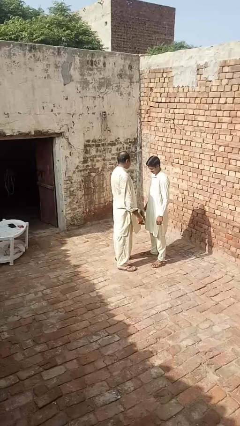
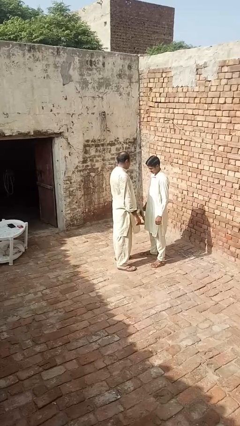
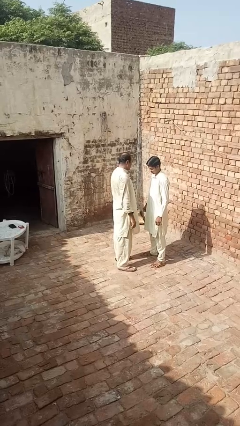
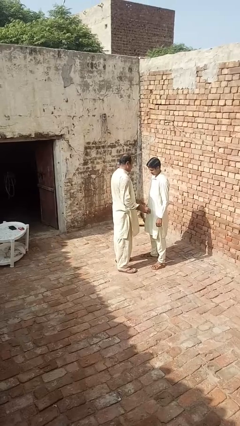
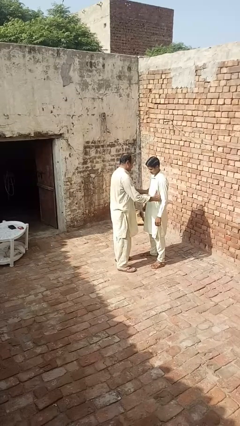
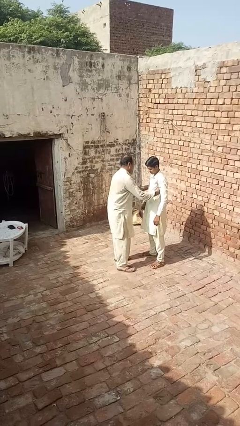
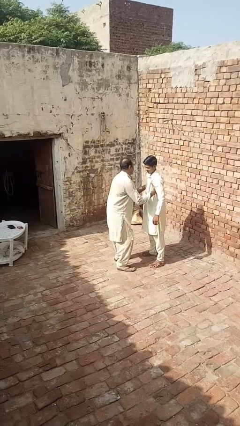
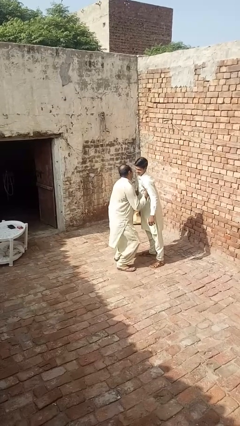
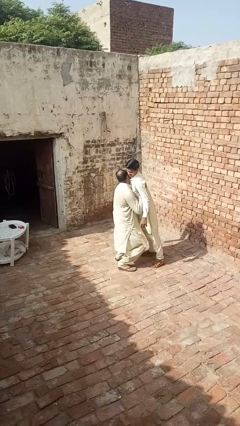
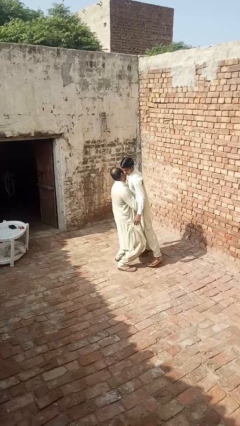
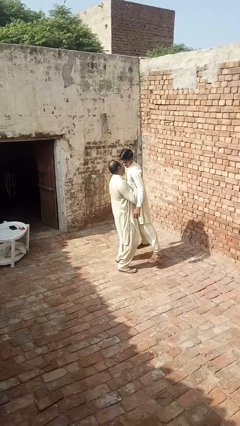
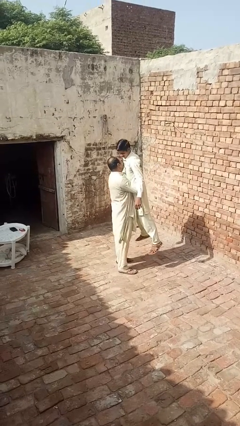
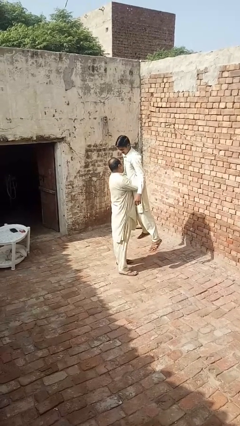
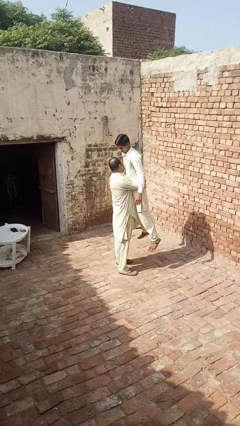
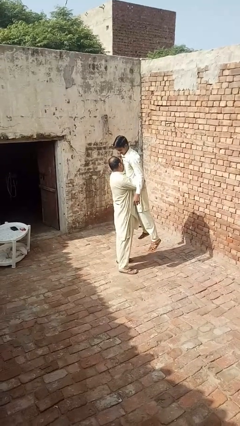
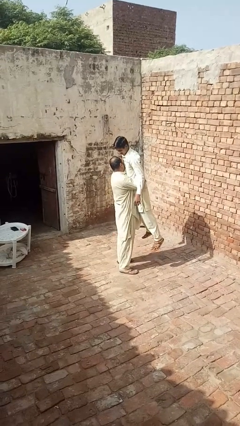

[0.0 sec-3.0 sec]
person picks up person

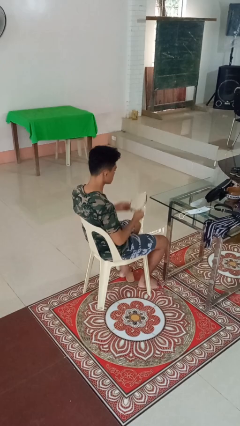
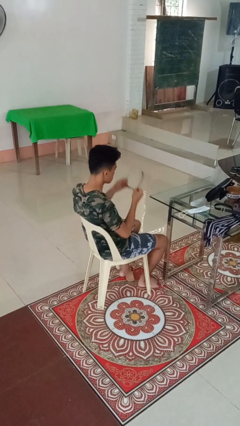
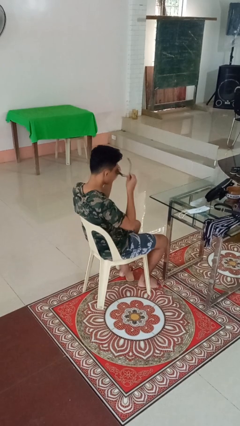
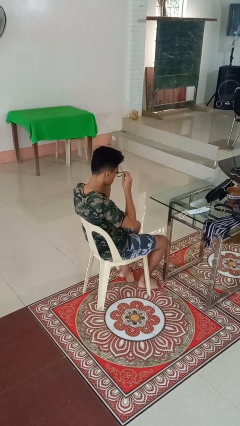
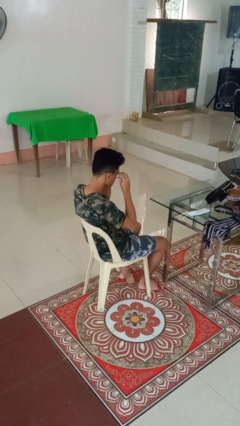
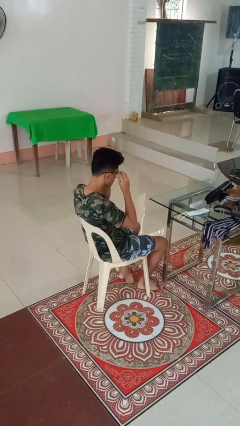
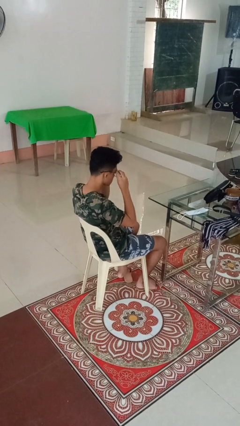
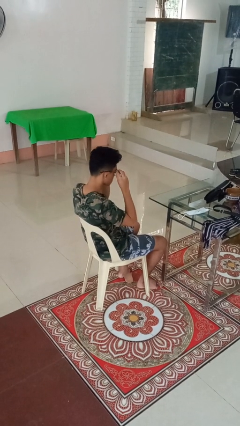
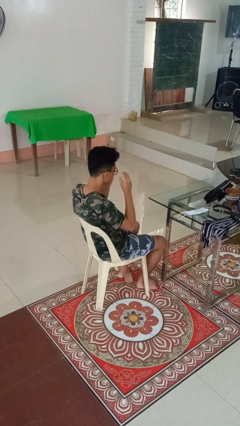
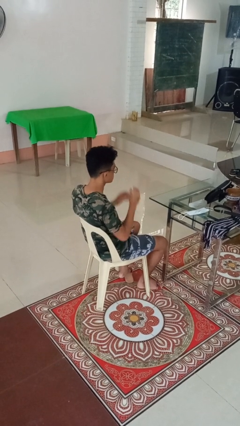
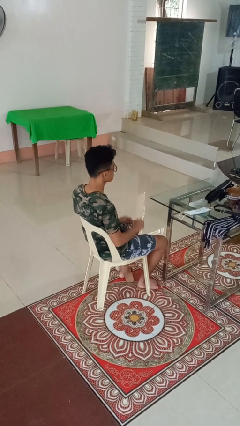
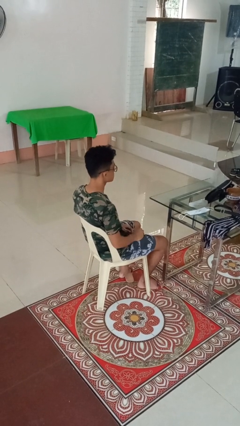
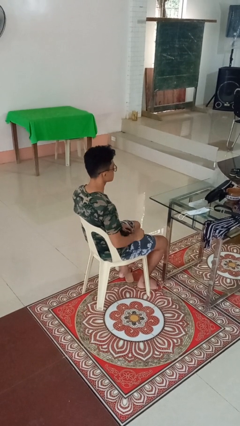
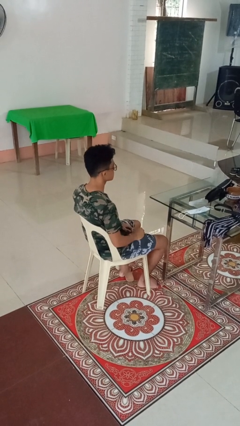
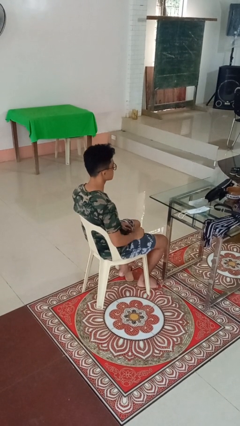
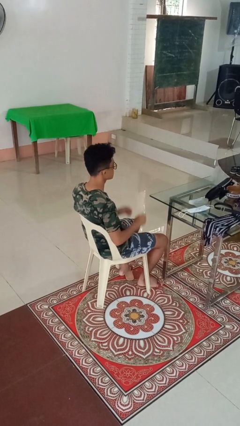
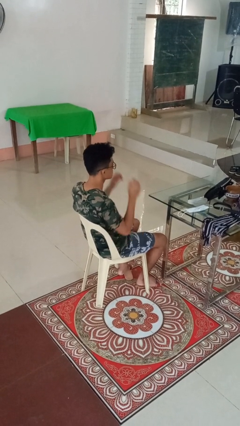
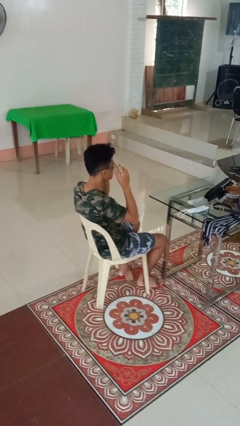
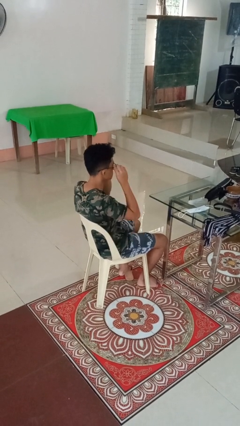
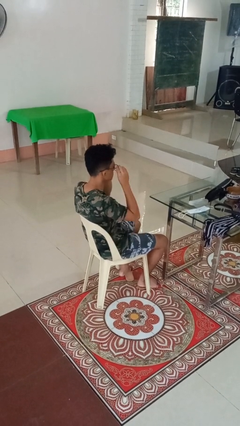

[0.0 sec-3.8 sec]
person puts on glasses

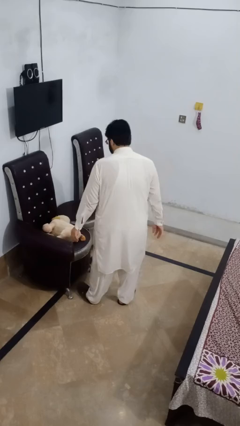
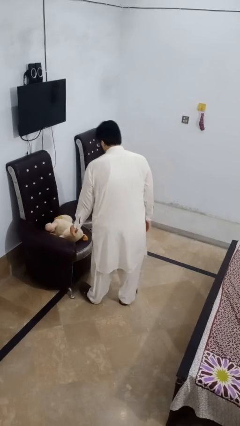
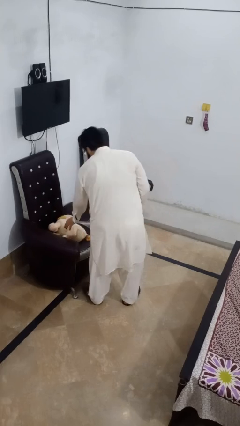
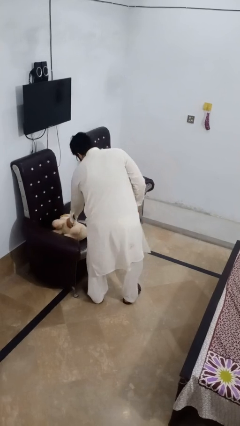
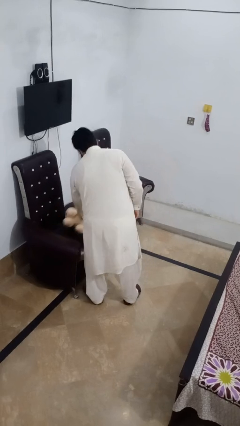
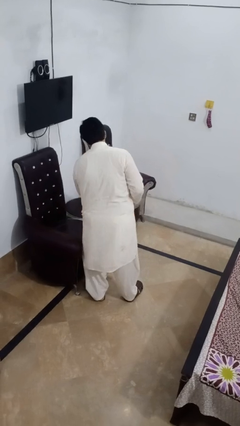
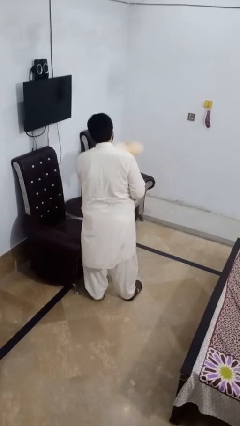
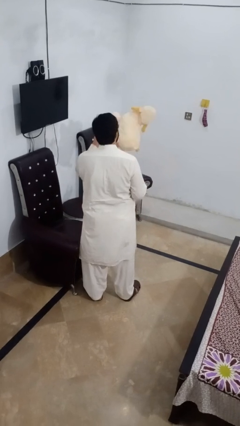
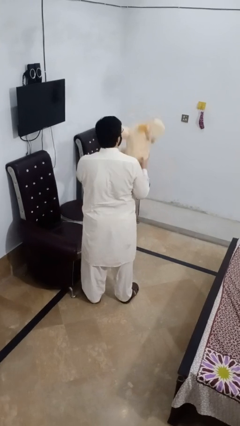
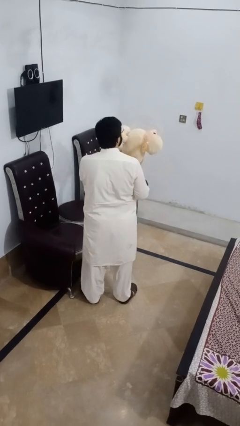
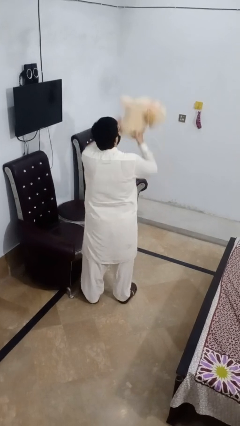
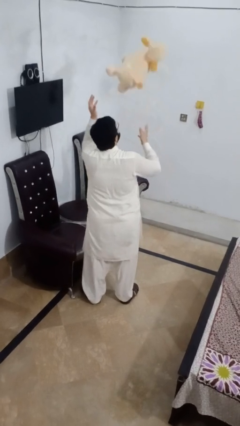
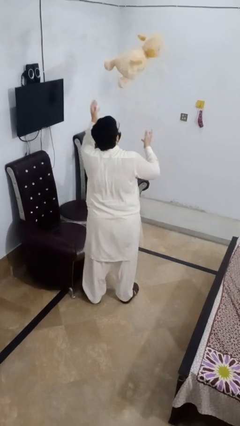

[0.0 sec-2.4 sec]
person picks up object from couch

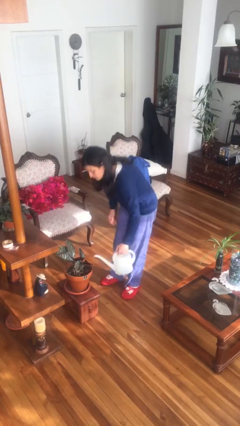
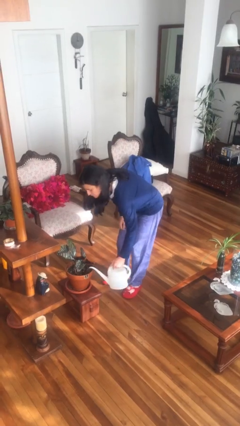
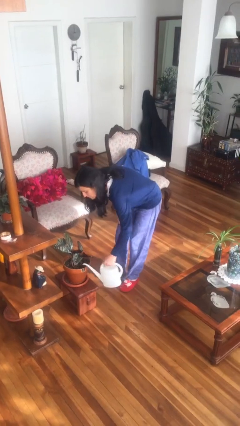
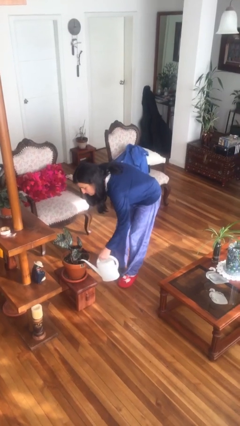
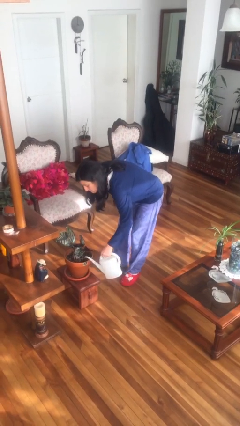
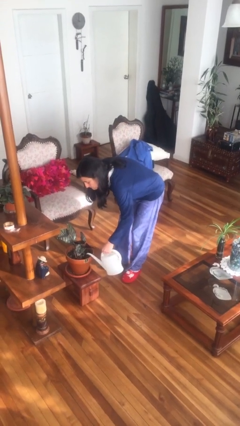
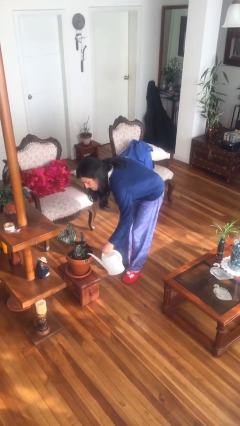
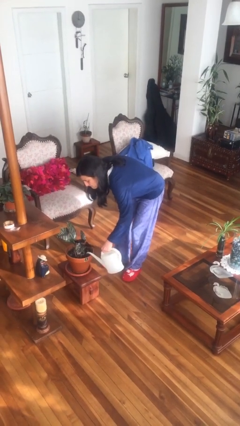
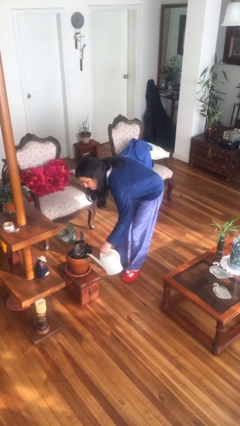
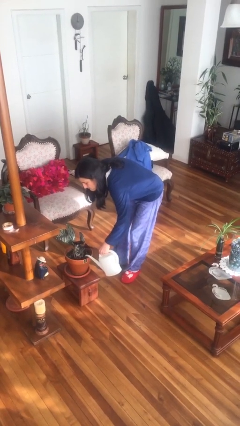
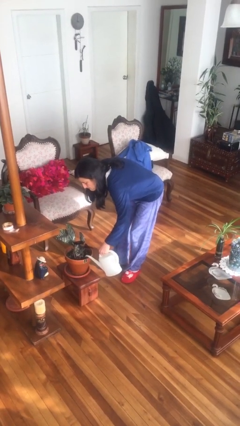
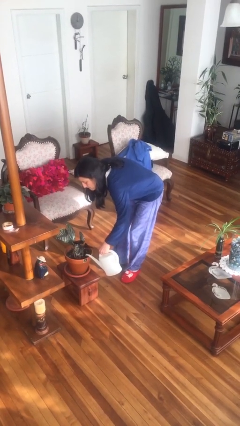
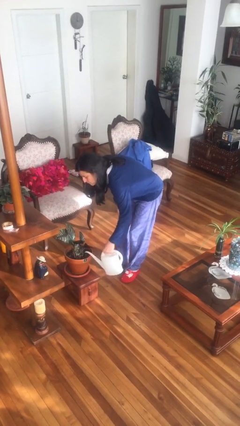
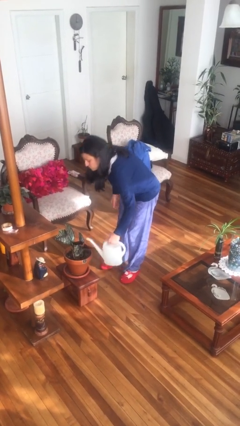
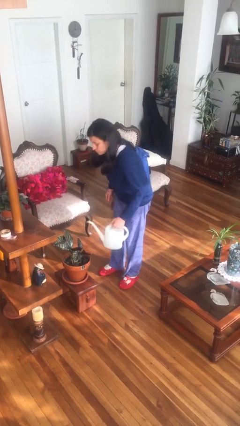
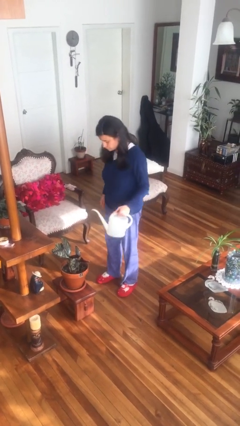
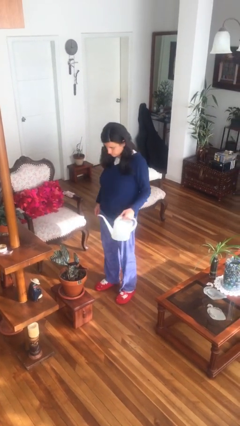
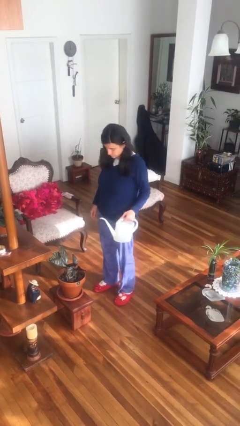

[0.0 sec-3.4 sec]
person waters houseplant

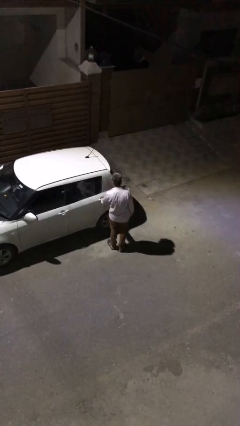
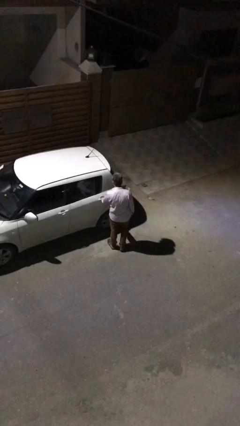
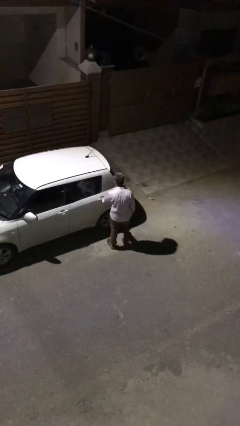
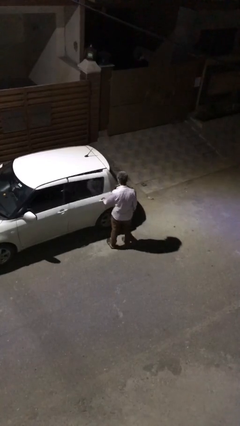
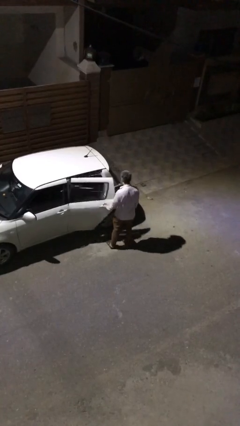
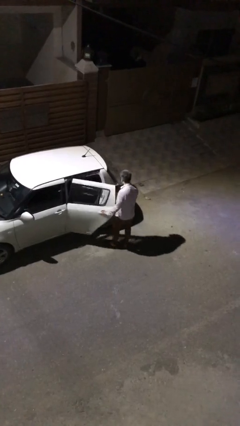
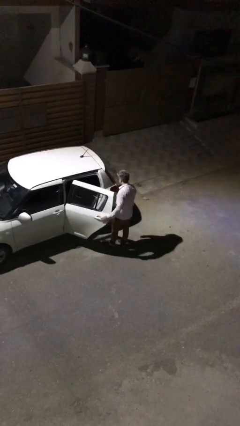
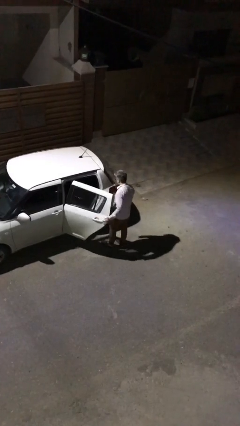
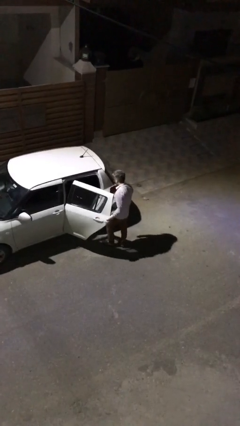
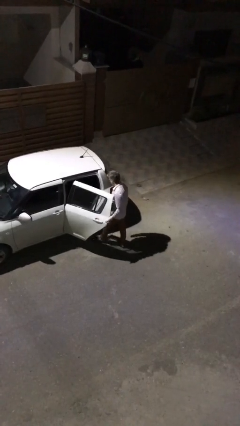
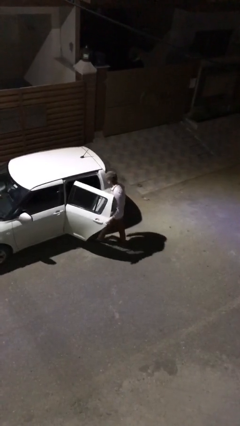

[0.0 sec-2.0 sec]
person opens car door

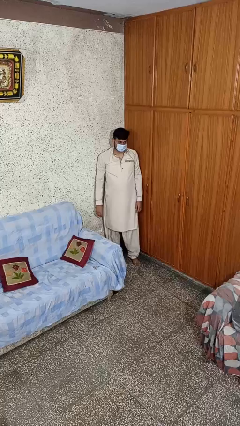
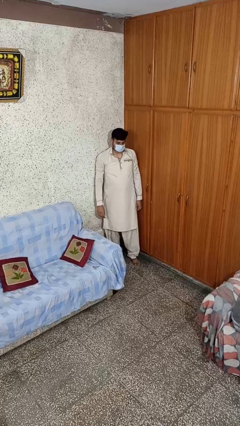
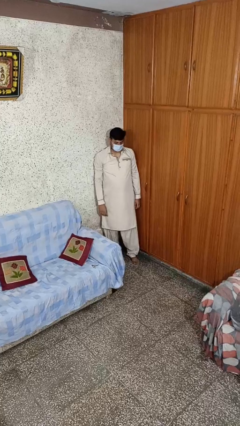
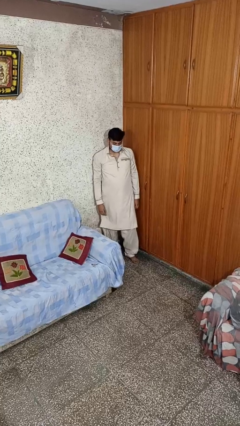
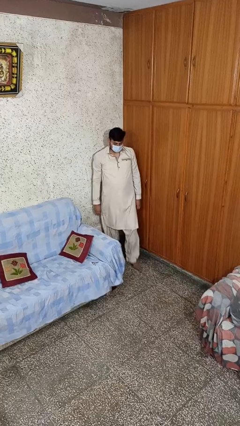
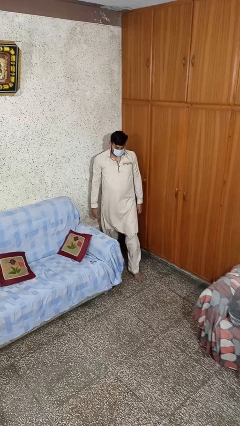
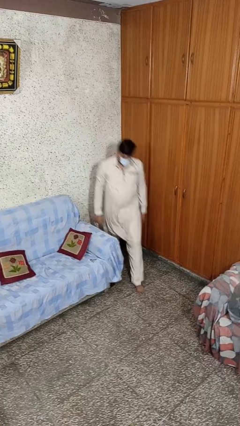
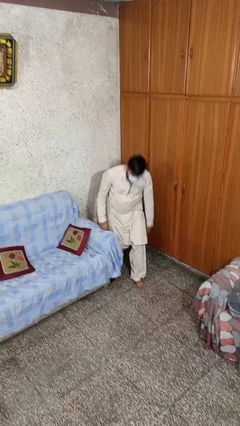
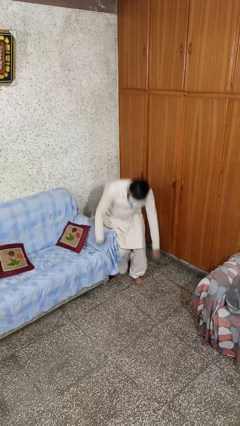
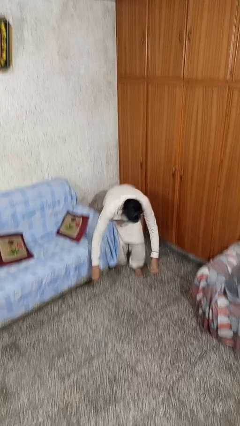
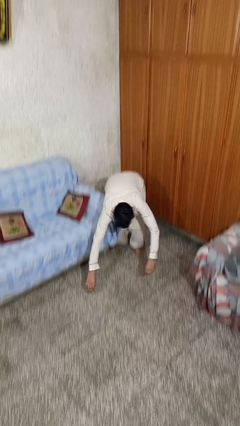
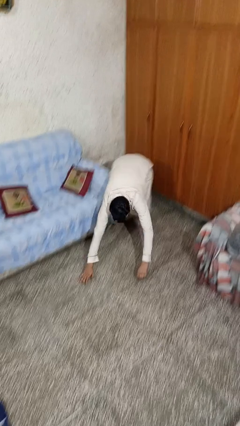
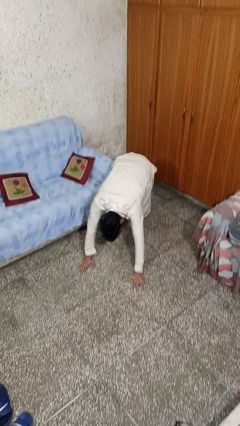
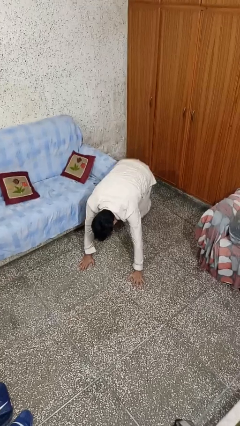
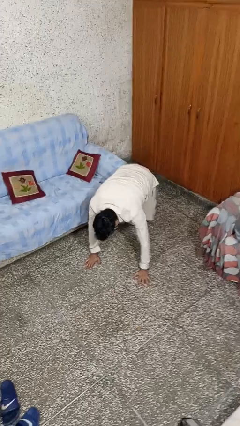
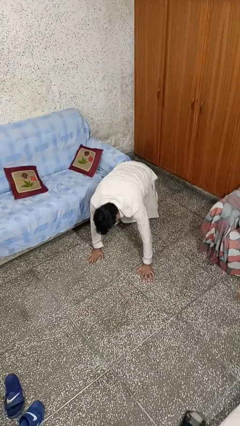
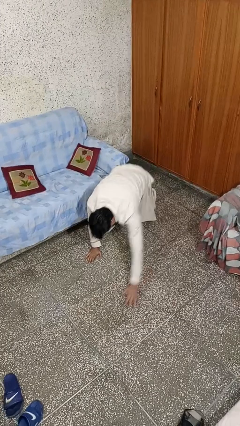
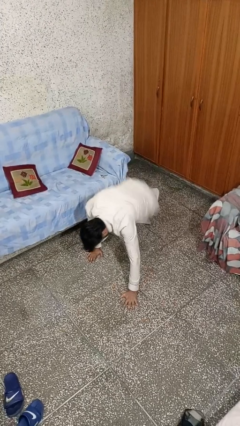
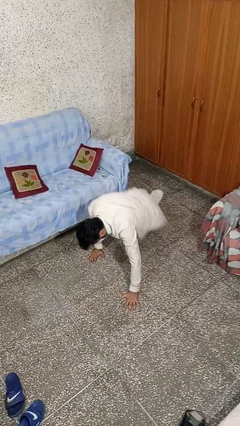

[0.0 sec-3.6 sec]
person trips on object on floor
